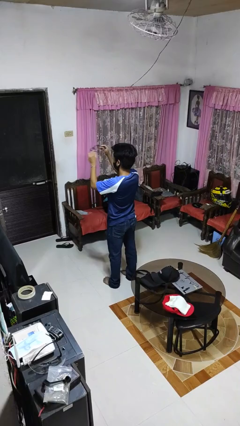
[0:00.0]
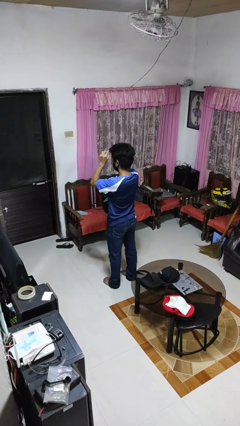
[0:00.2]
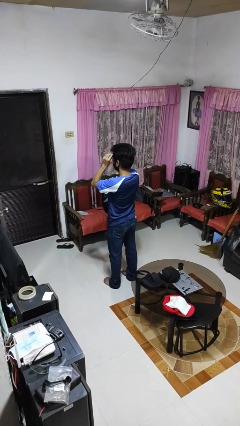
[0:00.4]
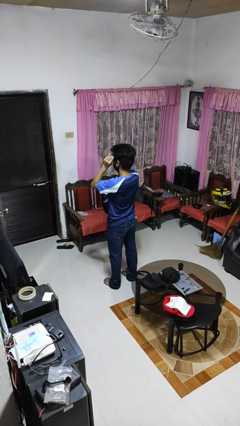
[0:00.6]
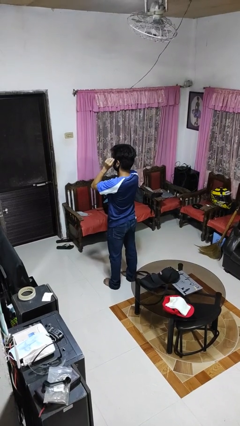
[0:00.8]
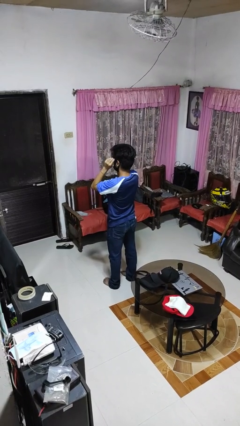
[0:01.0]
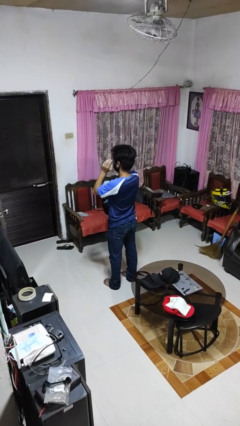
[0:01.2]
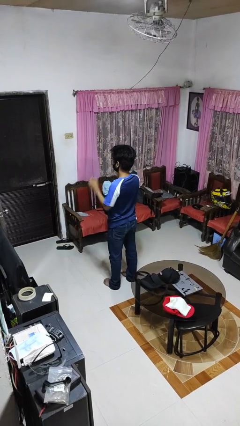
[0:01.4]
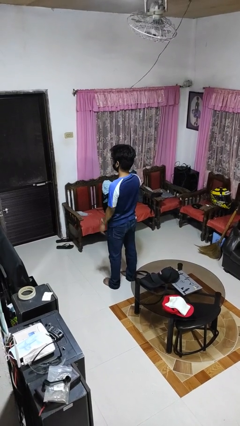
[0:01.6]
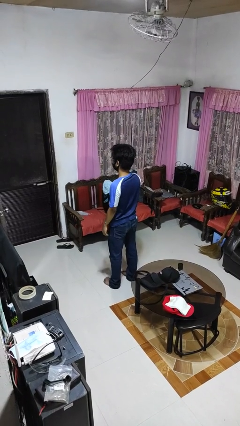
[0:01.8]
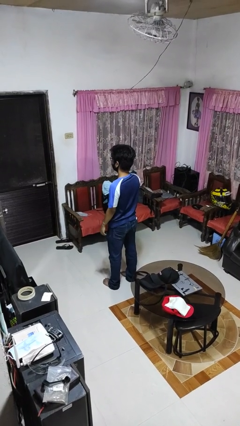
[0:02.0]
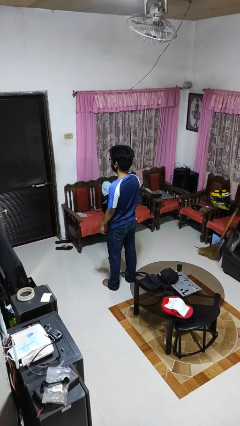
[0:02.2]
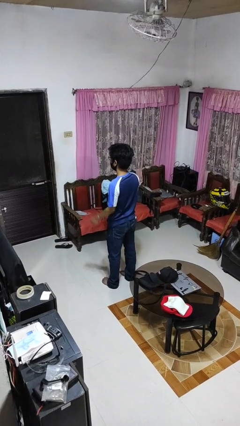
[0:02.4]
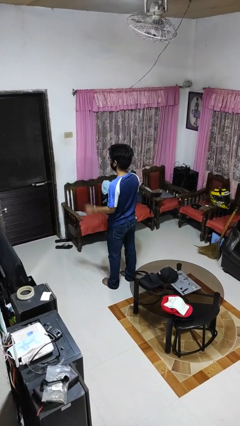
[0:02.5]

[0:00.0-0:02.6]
person puts on glasses

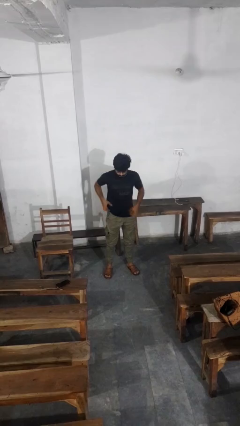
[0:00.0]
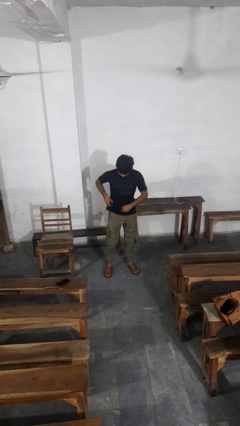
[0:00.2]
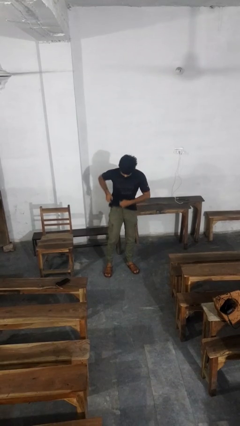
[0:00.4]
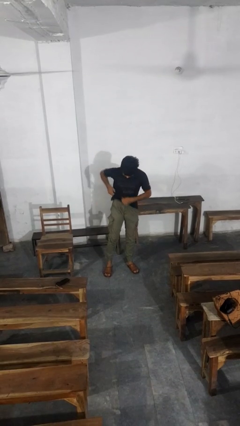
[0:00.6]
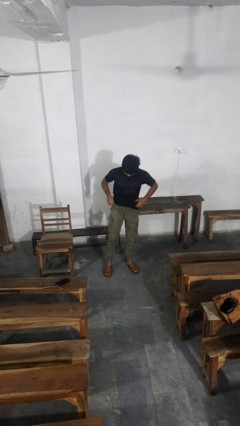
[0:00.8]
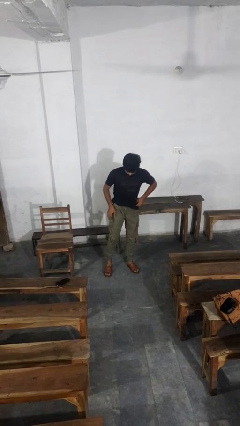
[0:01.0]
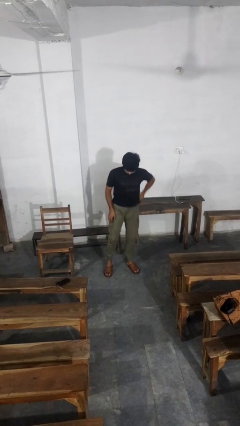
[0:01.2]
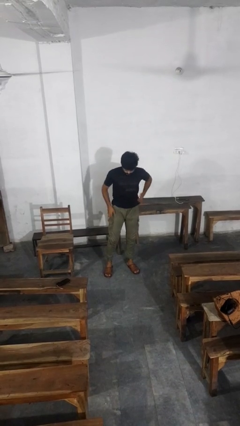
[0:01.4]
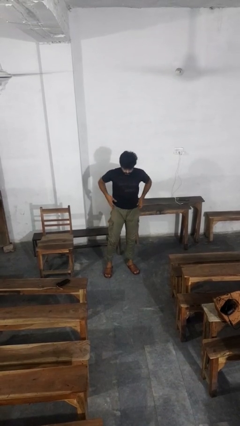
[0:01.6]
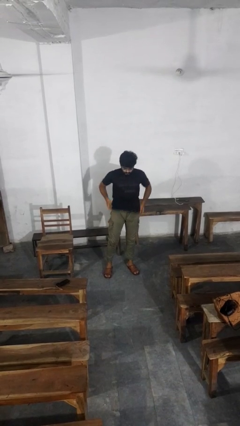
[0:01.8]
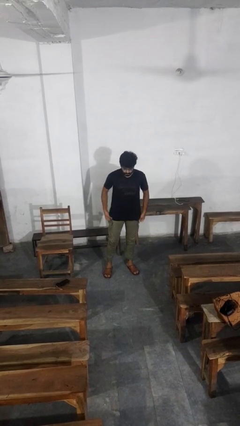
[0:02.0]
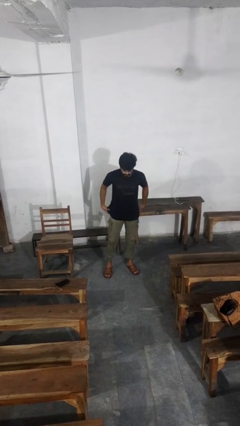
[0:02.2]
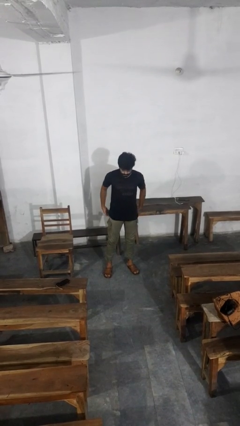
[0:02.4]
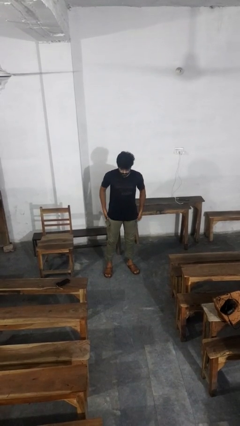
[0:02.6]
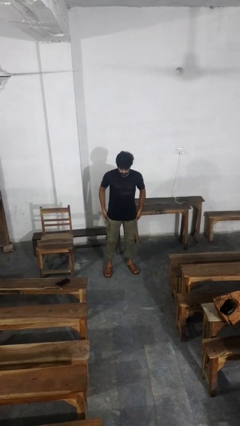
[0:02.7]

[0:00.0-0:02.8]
person hikes up pants

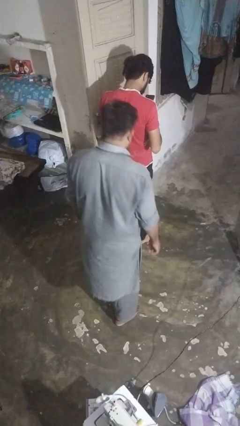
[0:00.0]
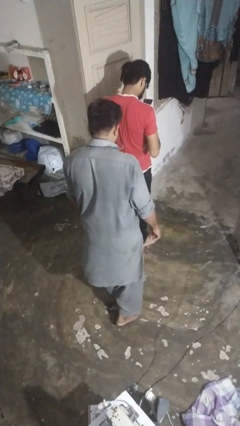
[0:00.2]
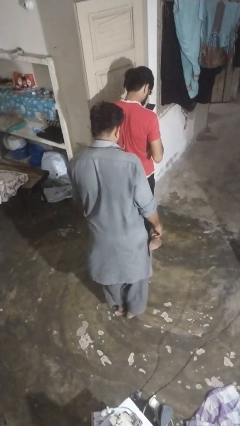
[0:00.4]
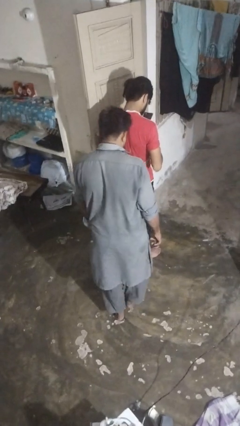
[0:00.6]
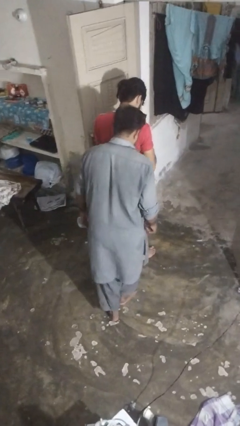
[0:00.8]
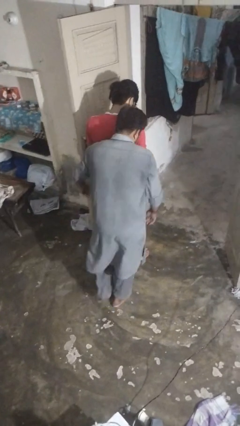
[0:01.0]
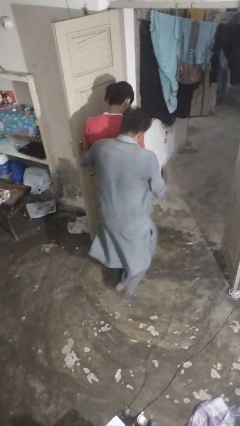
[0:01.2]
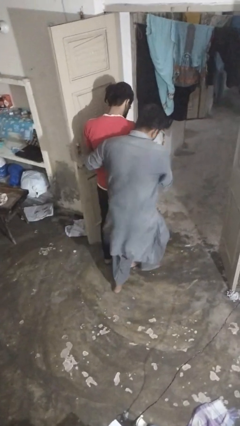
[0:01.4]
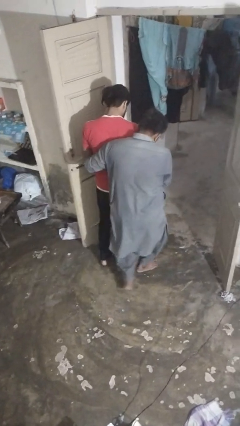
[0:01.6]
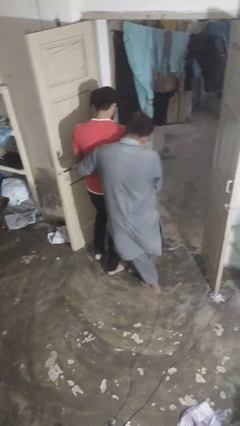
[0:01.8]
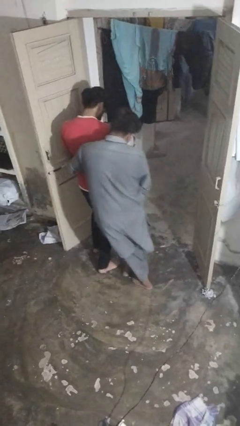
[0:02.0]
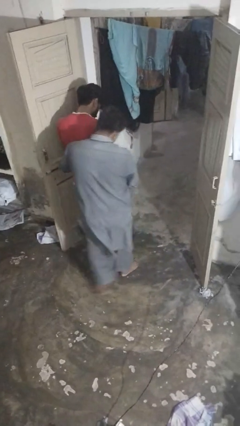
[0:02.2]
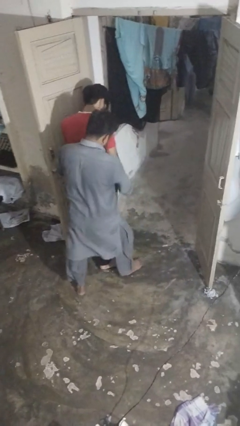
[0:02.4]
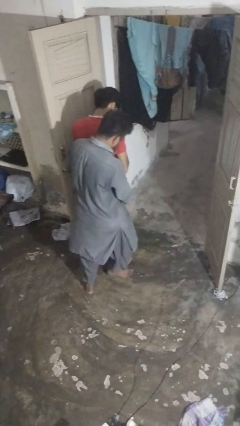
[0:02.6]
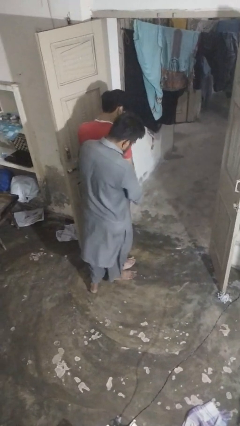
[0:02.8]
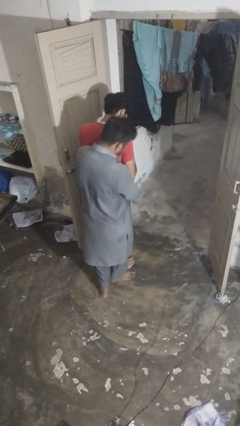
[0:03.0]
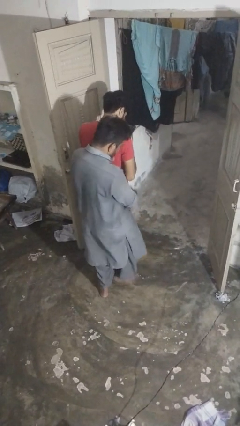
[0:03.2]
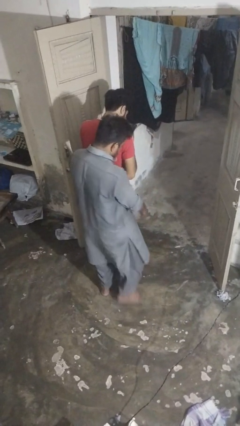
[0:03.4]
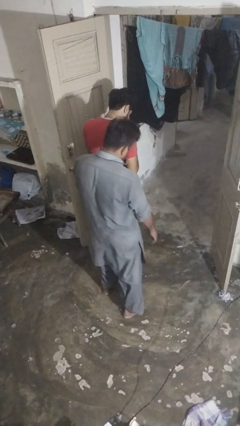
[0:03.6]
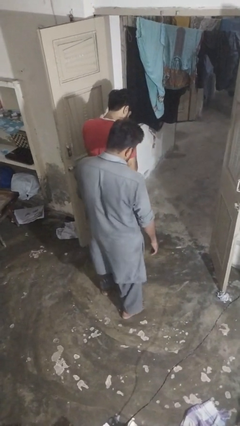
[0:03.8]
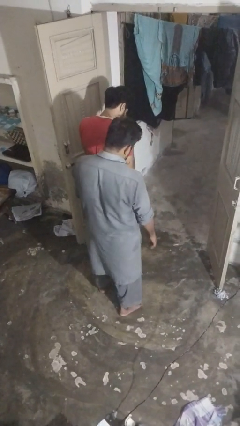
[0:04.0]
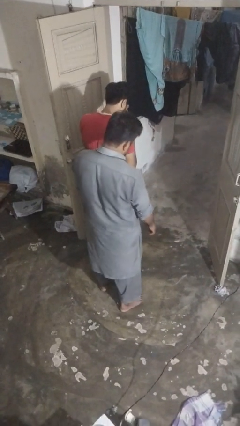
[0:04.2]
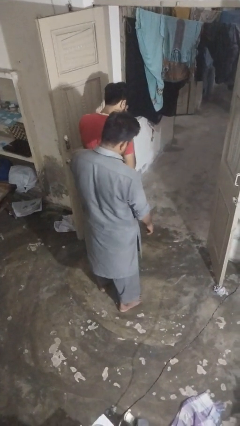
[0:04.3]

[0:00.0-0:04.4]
person bumps into person

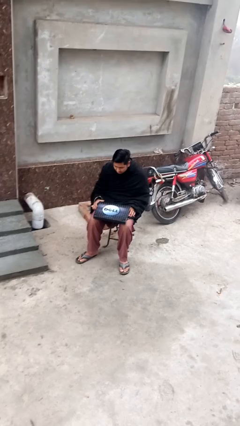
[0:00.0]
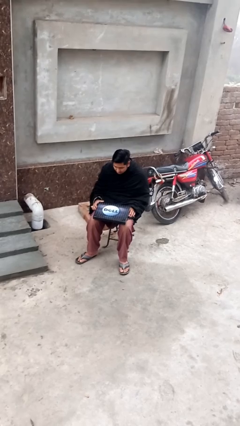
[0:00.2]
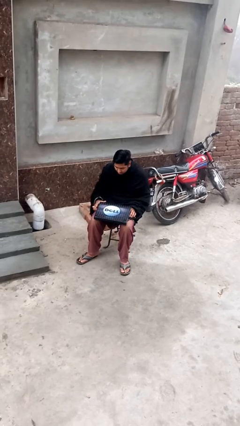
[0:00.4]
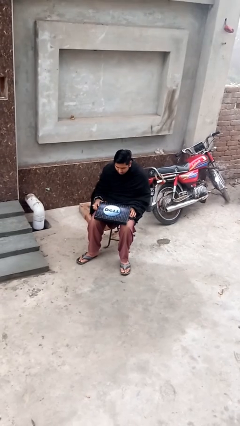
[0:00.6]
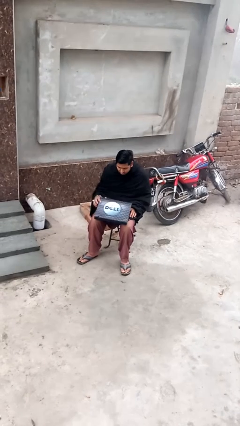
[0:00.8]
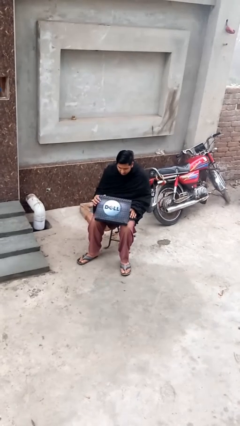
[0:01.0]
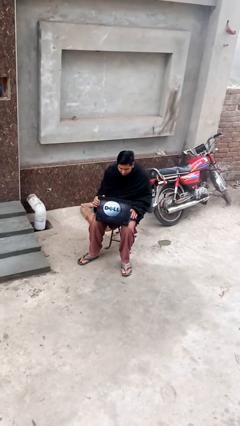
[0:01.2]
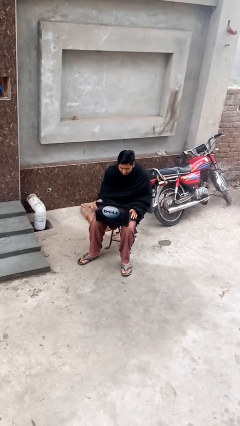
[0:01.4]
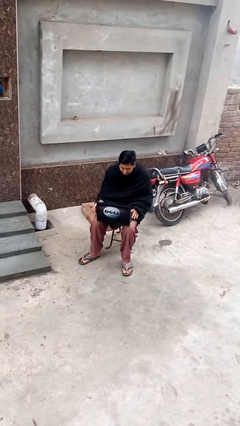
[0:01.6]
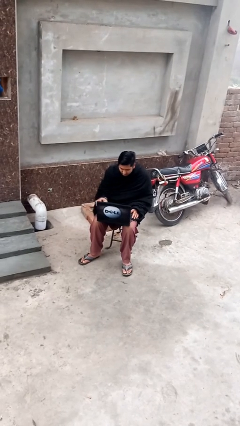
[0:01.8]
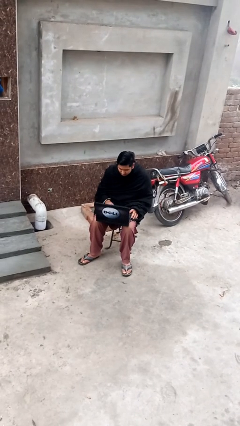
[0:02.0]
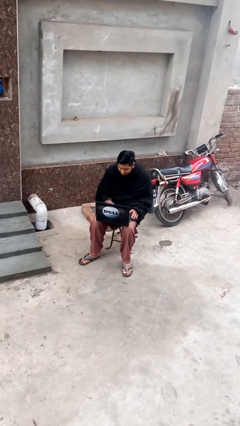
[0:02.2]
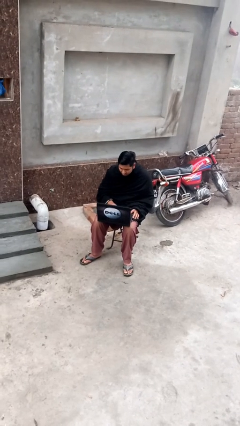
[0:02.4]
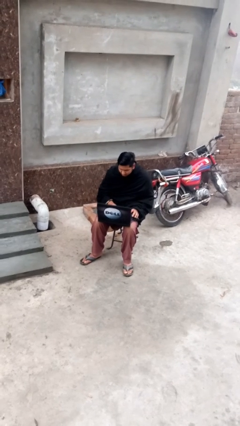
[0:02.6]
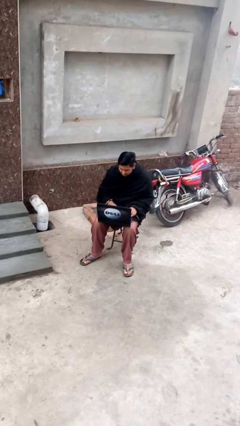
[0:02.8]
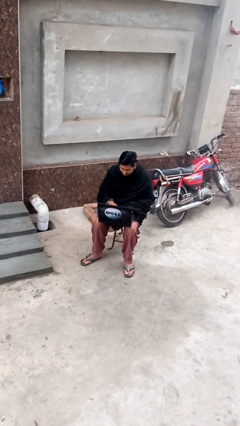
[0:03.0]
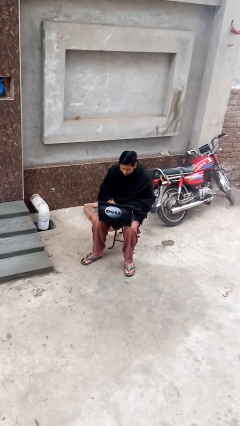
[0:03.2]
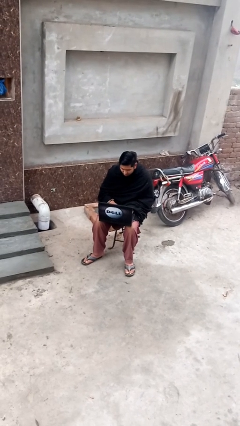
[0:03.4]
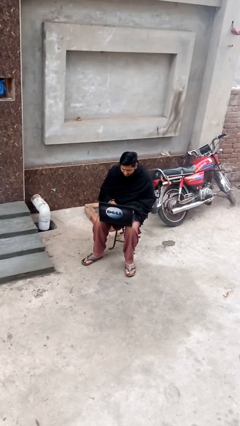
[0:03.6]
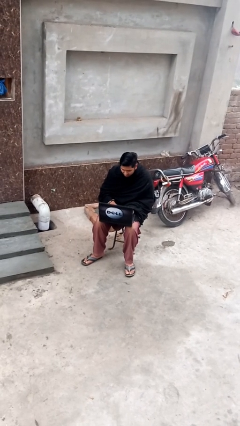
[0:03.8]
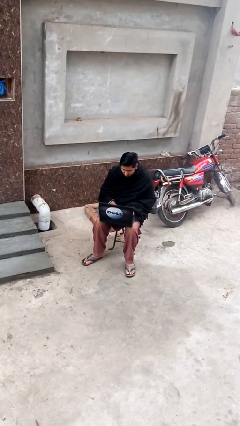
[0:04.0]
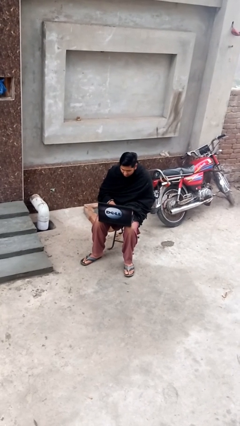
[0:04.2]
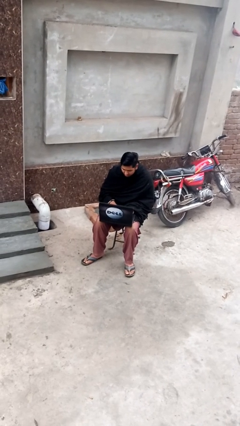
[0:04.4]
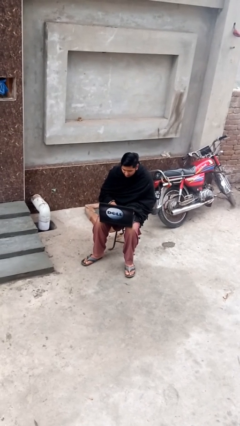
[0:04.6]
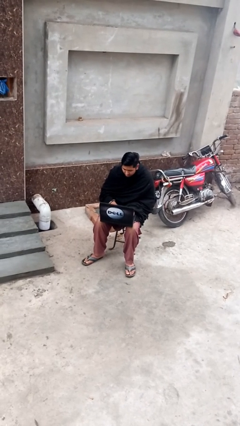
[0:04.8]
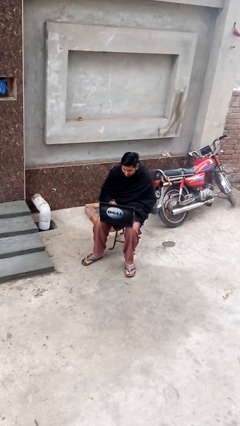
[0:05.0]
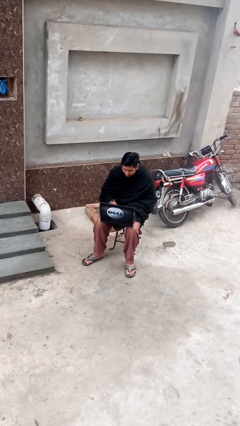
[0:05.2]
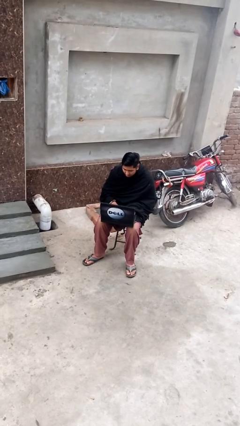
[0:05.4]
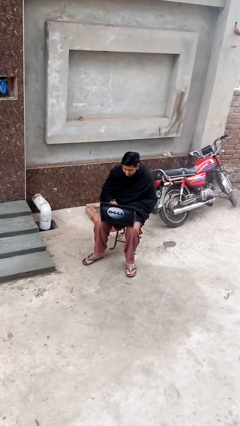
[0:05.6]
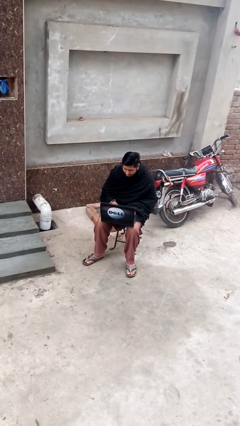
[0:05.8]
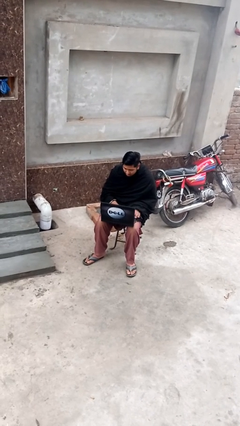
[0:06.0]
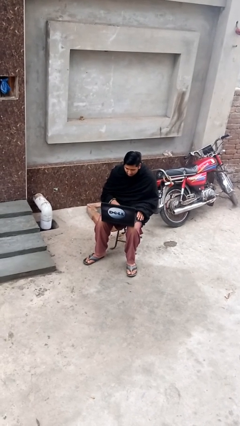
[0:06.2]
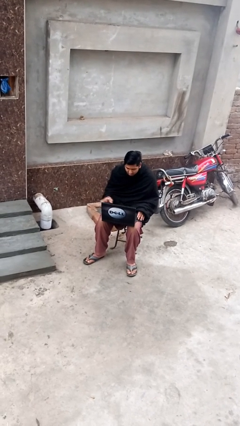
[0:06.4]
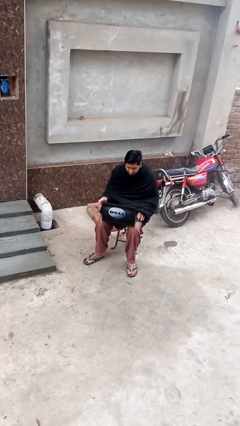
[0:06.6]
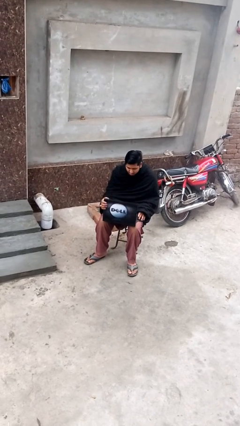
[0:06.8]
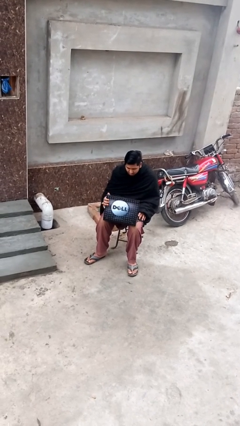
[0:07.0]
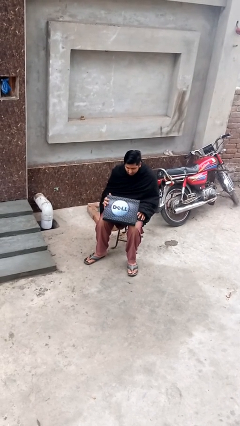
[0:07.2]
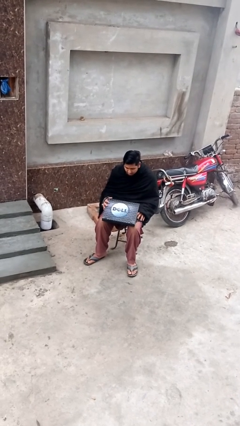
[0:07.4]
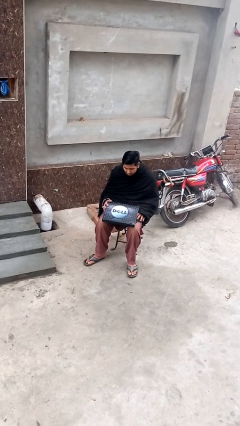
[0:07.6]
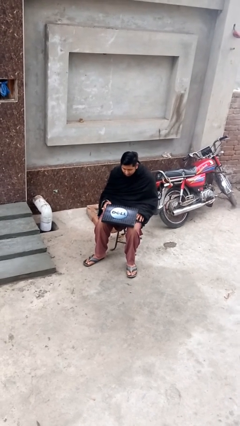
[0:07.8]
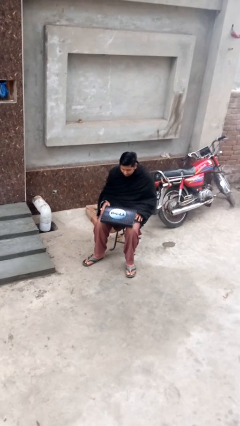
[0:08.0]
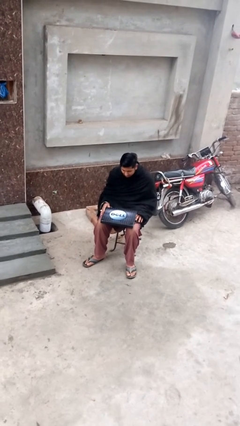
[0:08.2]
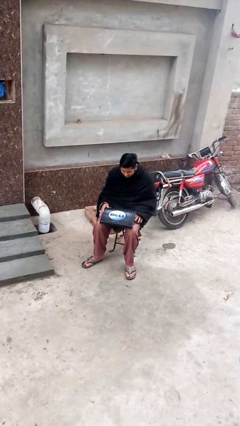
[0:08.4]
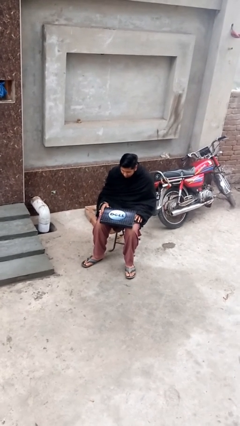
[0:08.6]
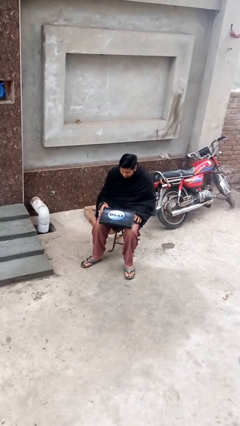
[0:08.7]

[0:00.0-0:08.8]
person interacts with laptop
